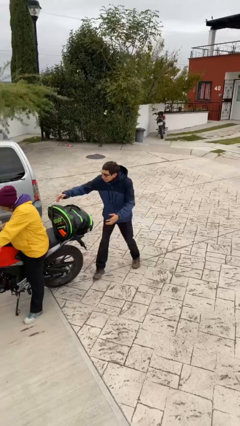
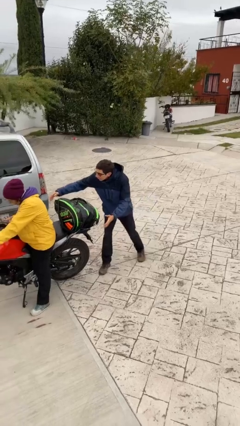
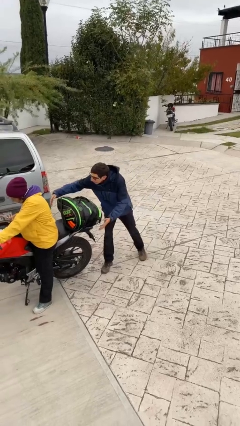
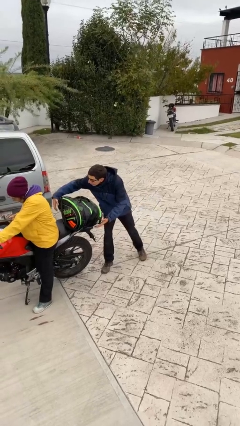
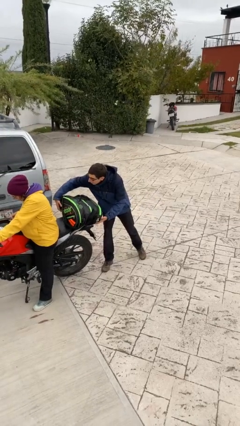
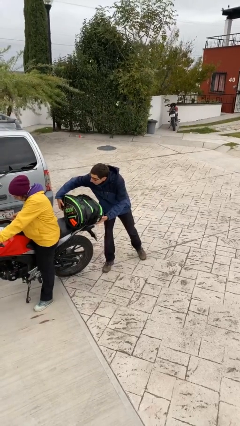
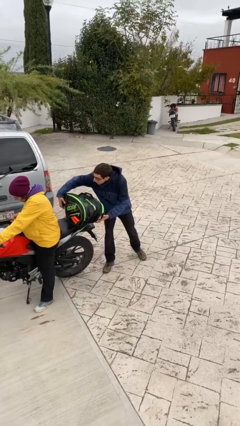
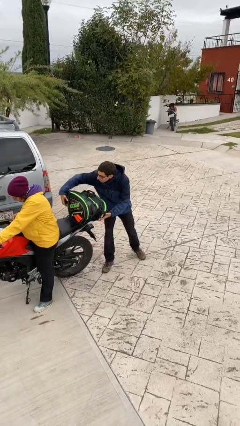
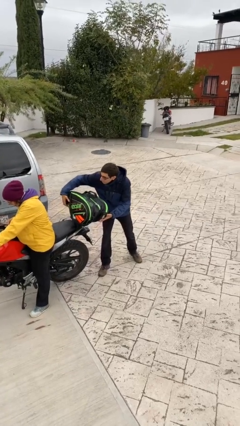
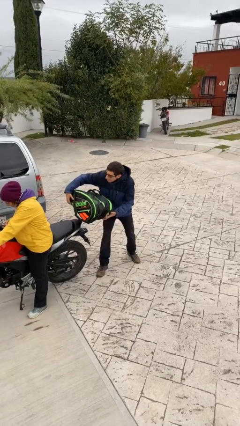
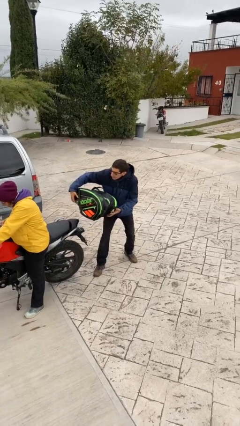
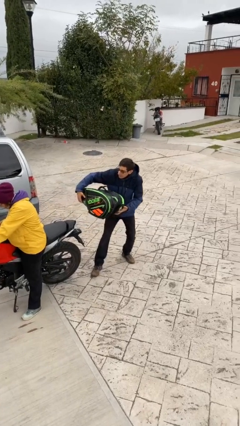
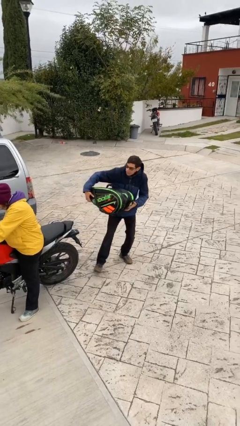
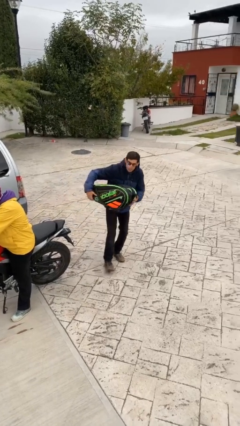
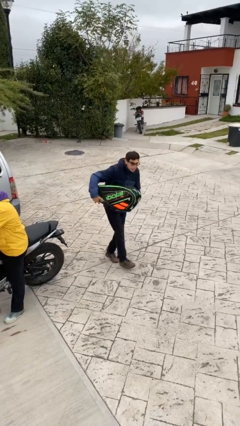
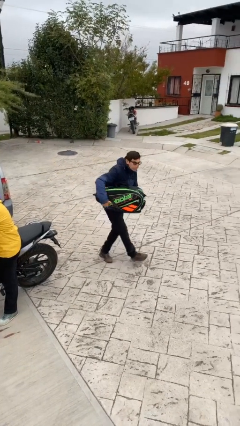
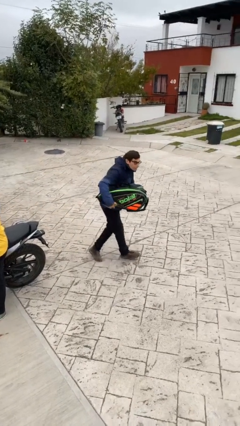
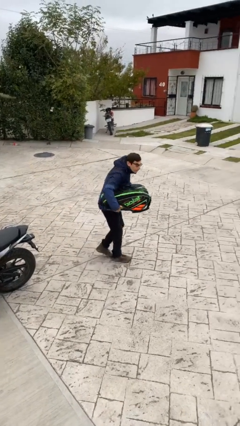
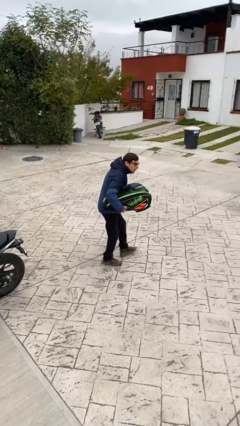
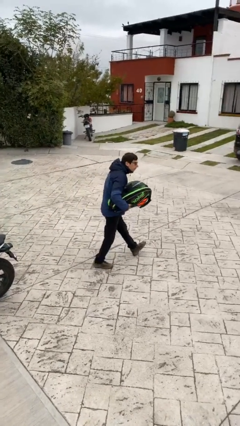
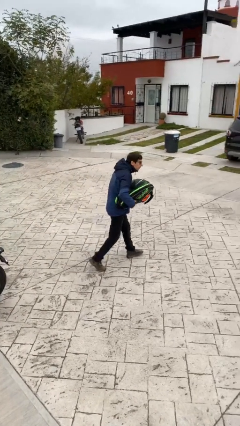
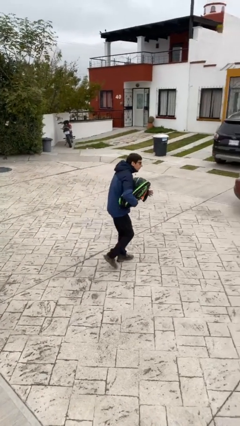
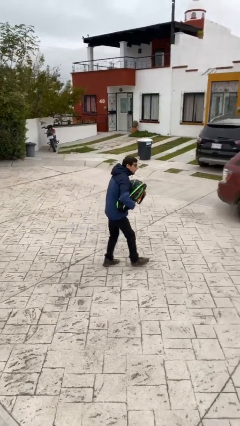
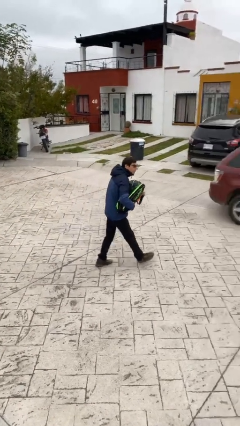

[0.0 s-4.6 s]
person steals object from person

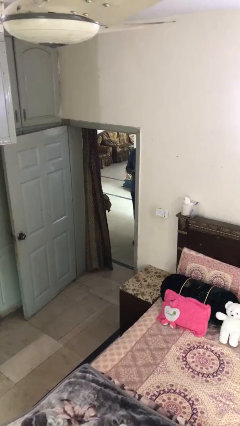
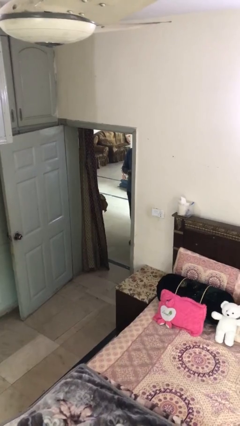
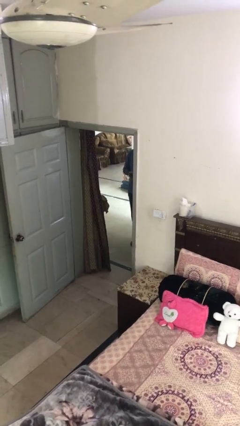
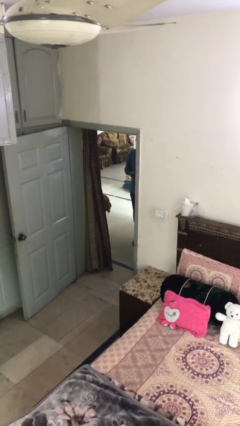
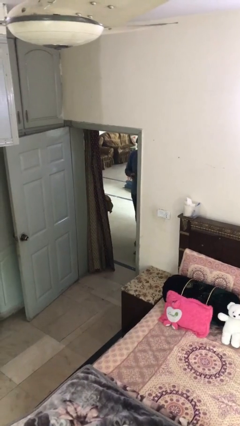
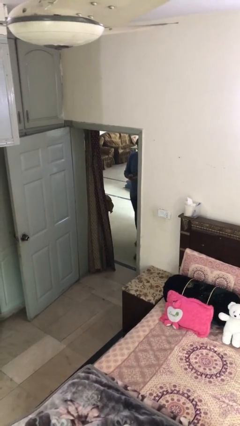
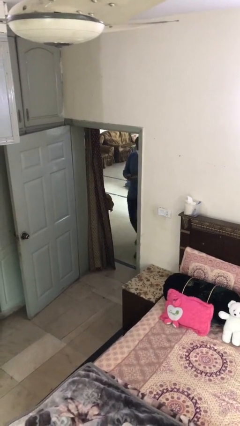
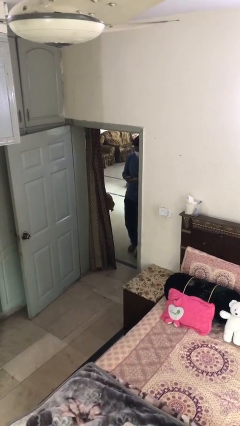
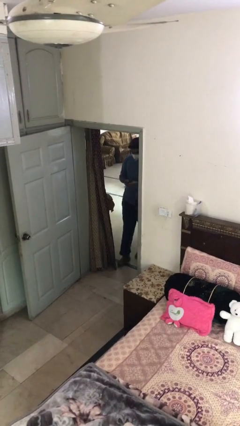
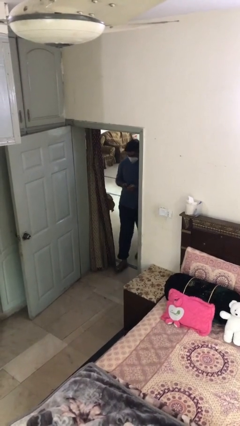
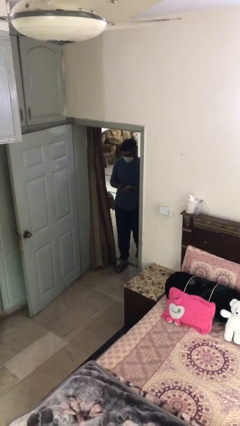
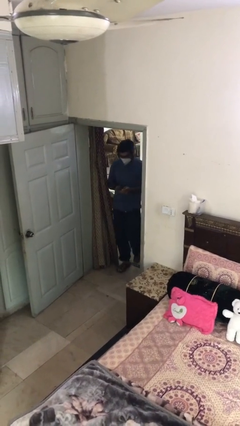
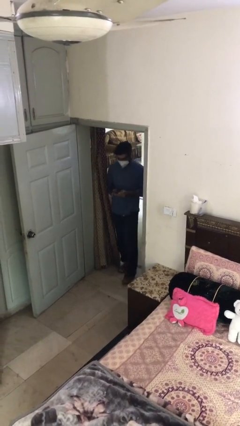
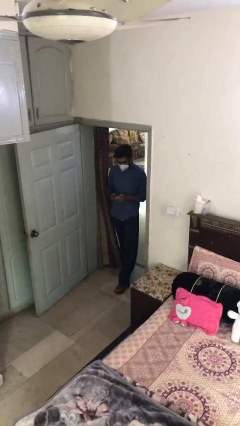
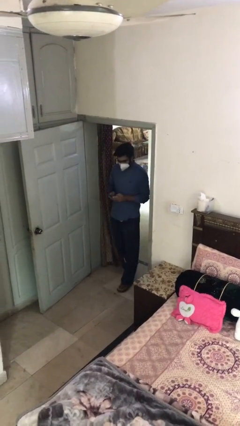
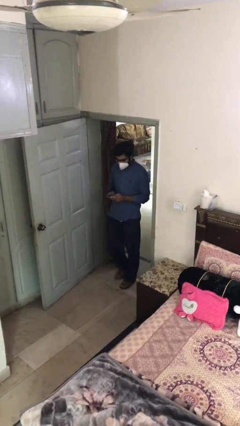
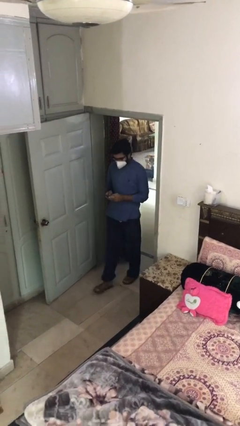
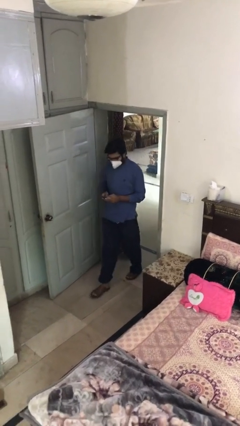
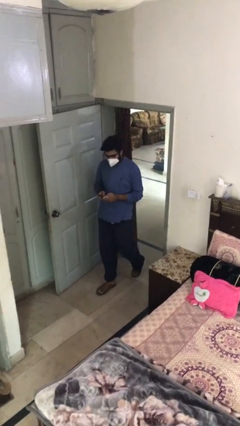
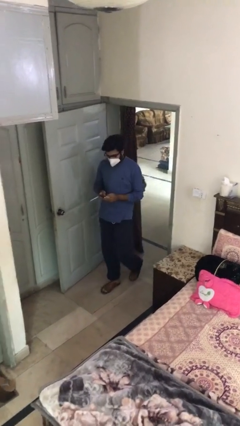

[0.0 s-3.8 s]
person enters scene through structure

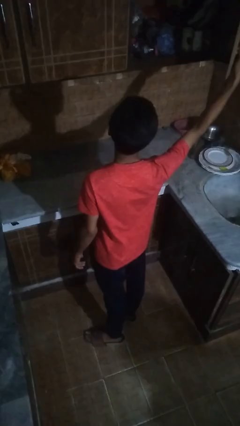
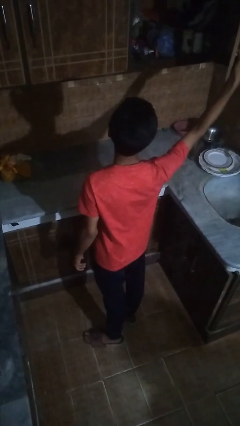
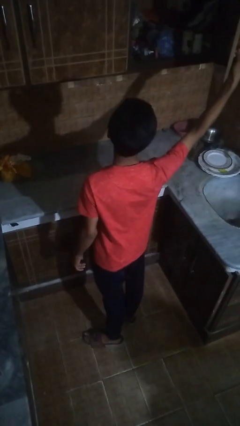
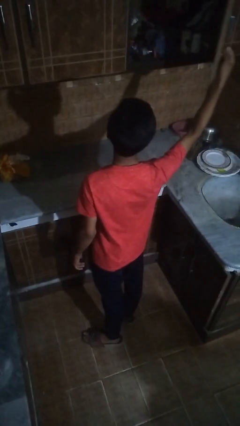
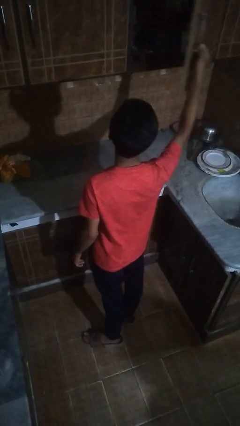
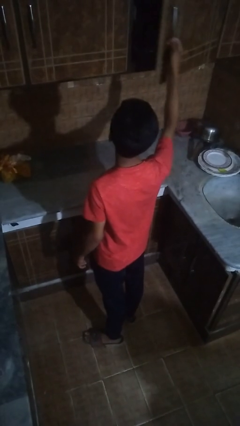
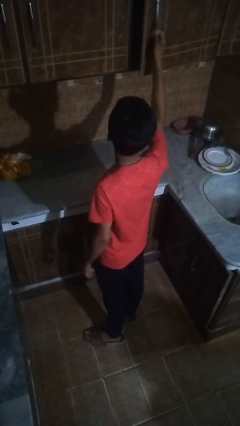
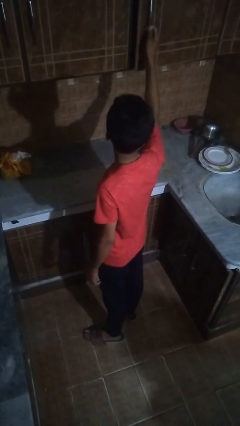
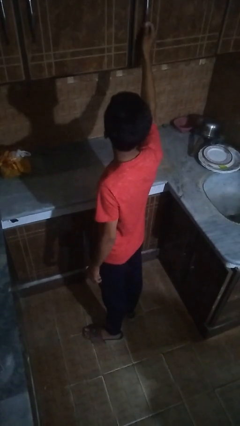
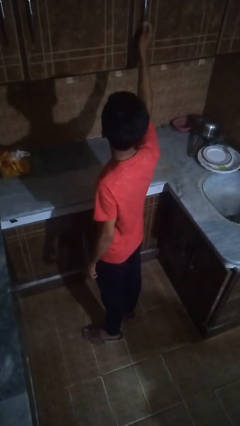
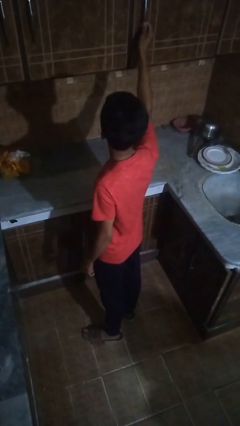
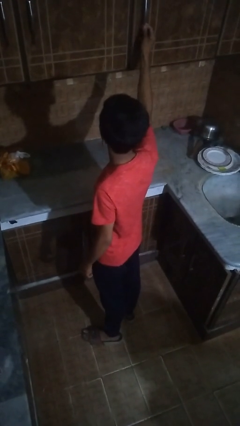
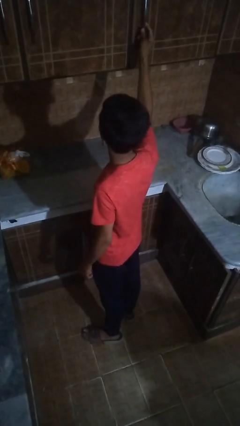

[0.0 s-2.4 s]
person closes cabinet

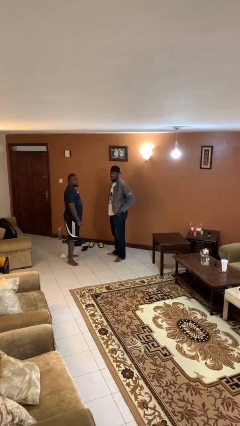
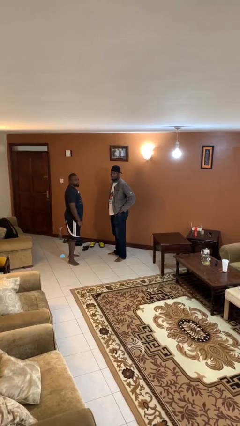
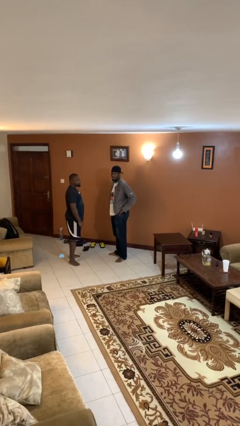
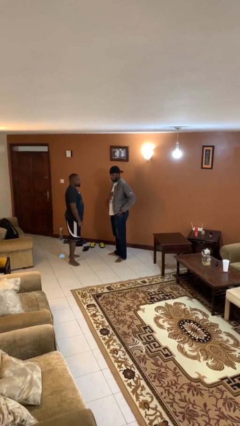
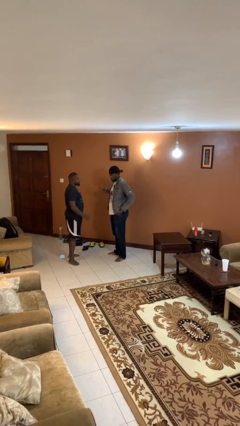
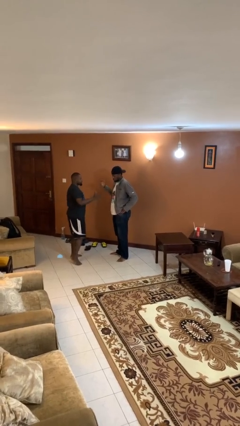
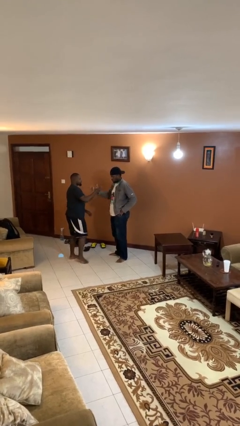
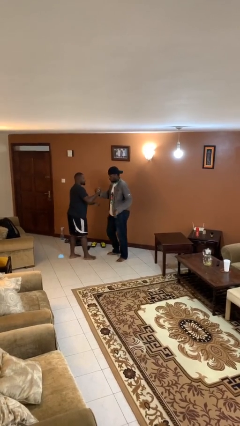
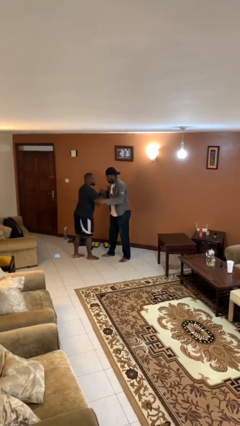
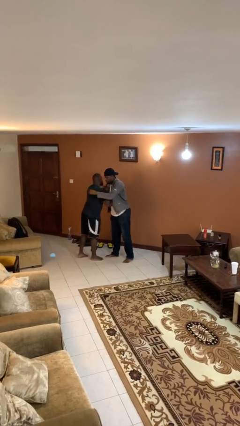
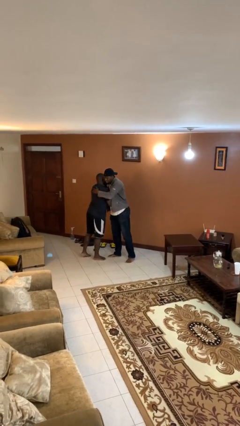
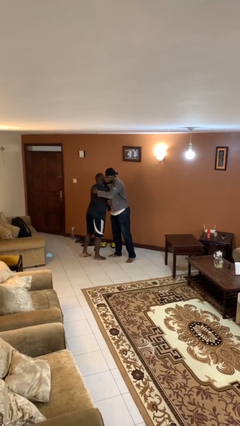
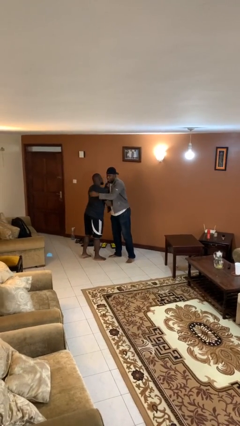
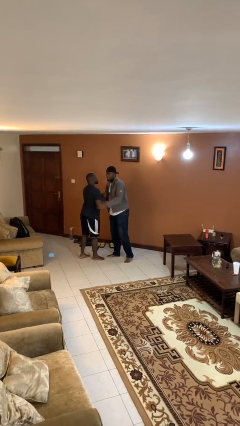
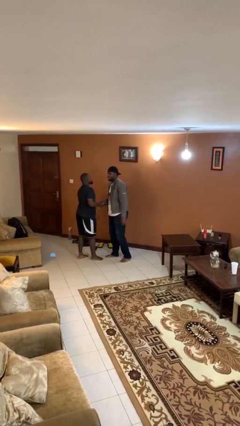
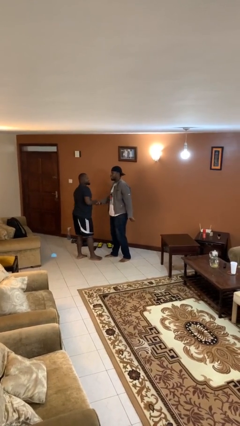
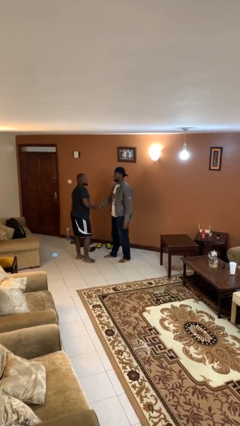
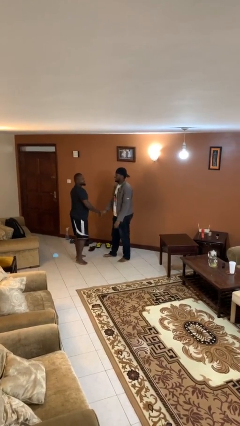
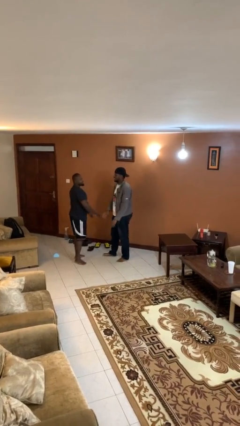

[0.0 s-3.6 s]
person embraces person

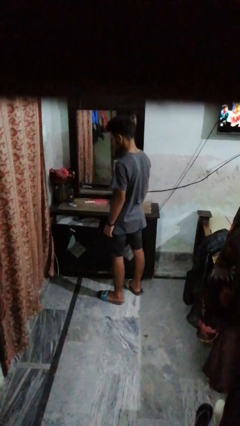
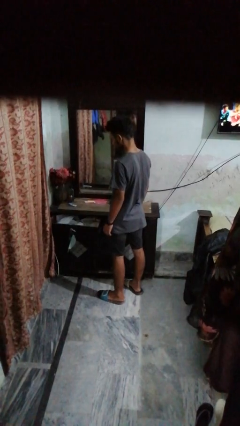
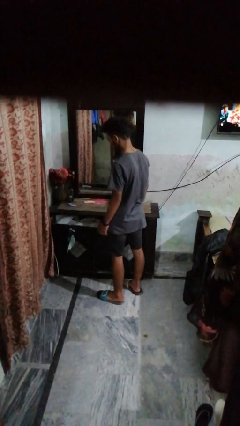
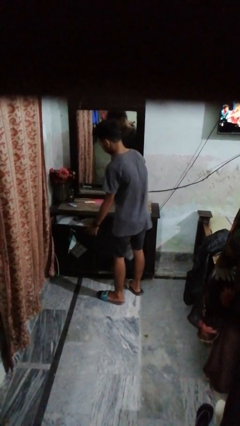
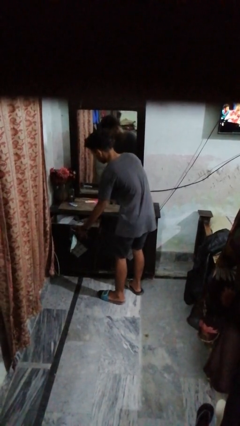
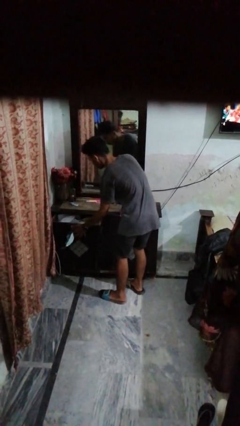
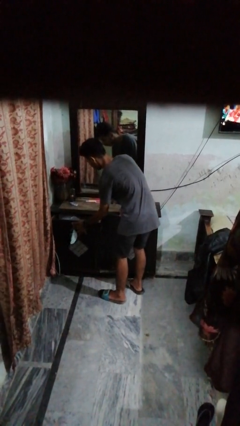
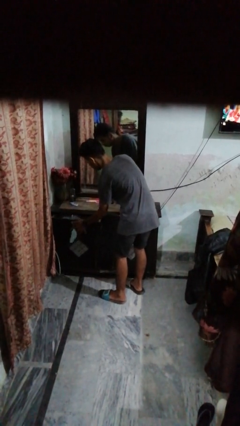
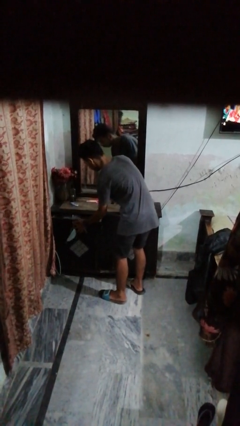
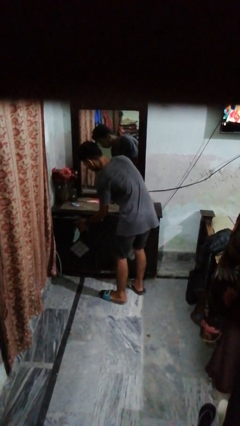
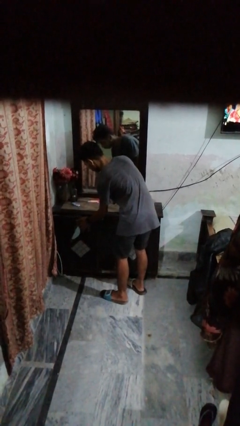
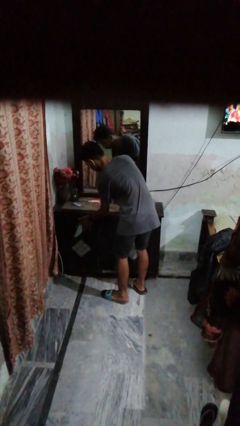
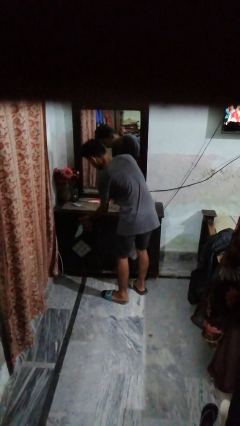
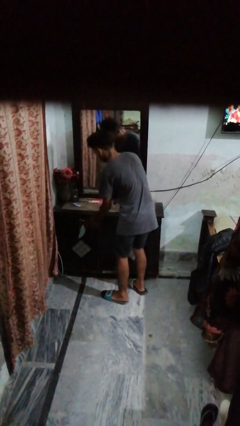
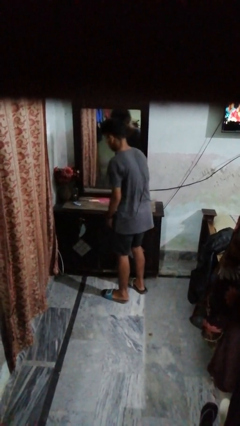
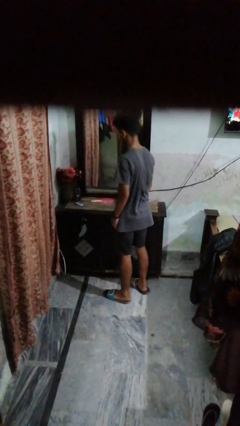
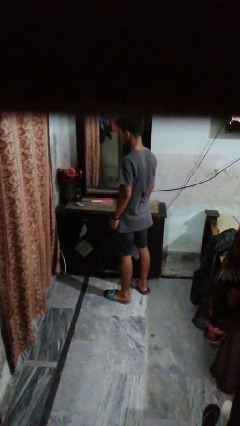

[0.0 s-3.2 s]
person closes dresser drawer

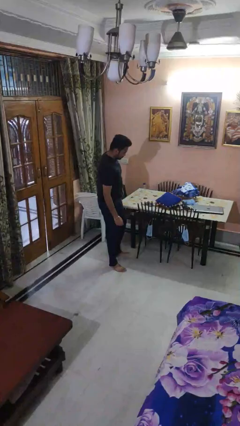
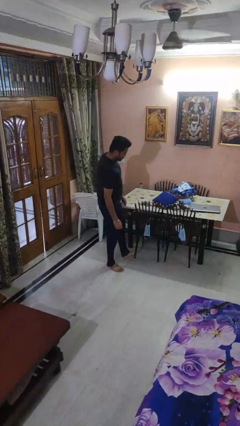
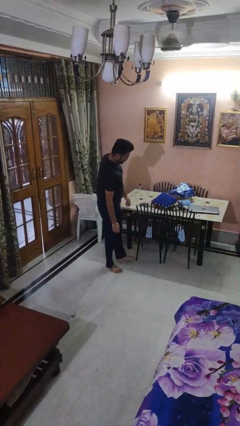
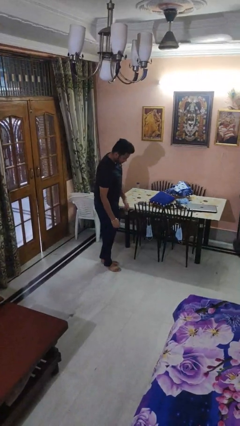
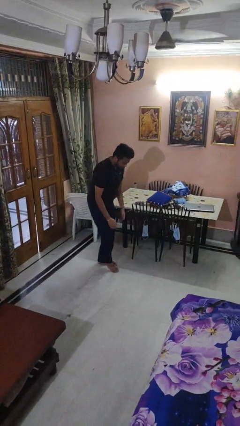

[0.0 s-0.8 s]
person trips on object on floor
